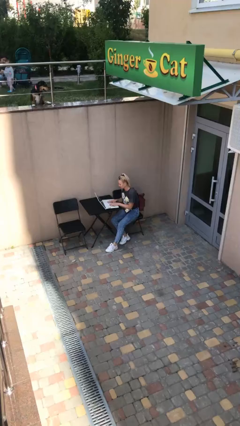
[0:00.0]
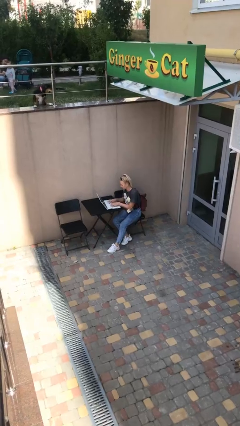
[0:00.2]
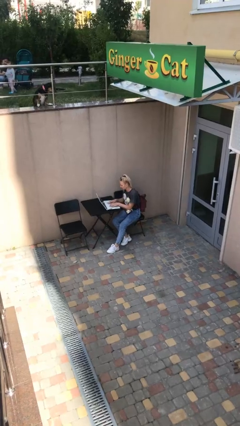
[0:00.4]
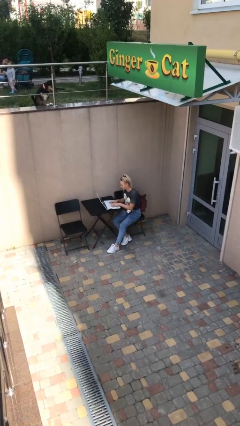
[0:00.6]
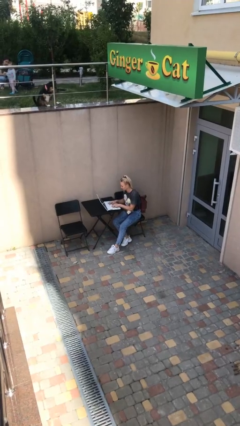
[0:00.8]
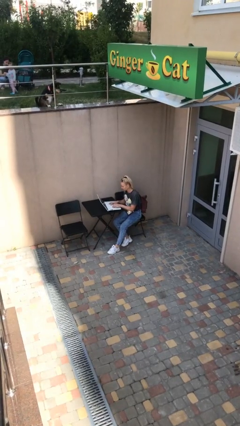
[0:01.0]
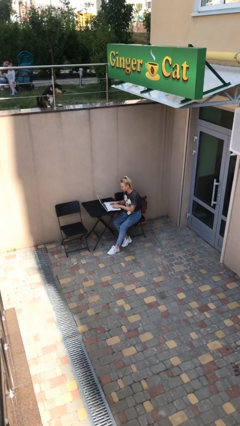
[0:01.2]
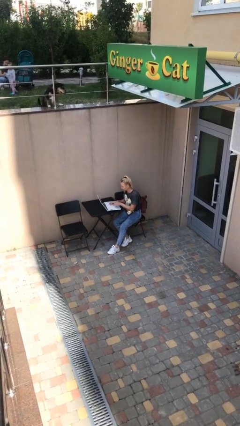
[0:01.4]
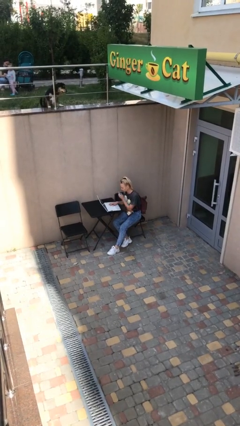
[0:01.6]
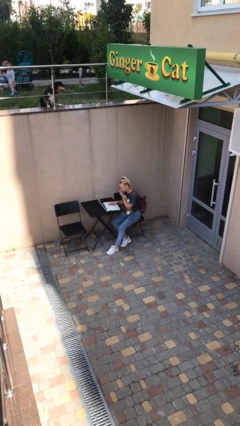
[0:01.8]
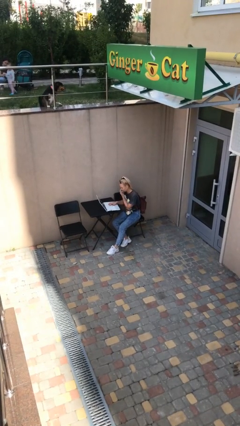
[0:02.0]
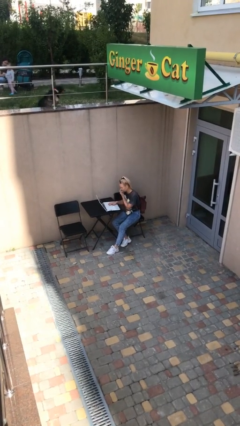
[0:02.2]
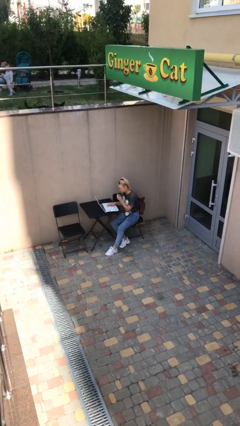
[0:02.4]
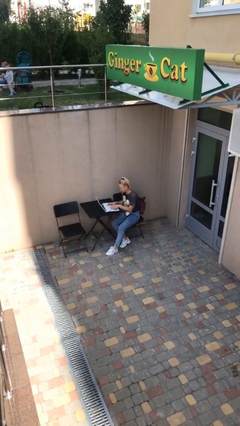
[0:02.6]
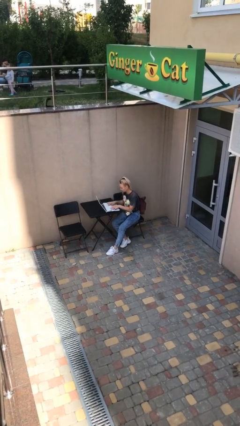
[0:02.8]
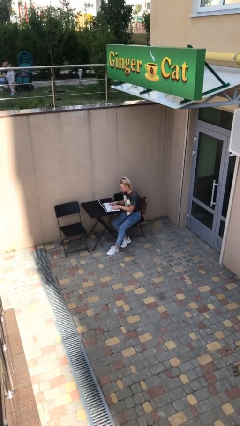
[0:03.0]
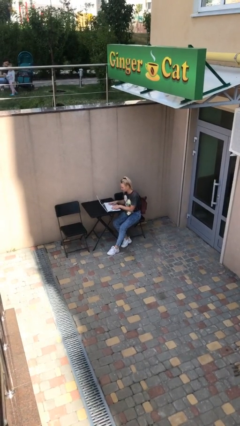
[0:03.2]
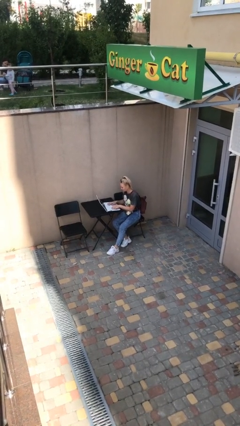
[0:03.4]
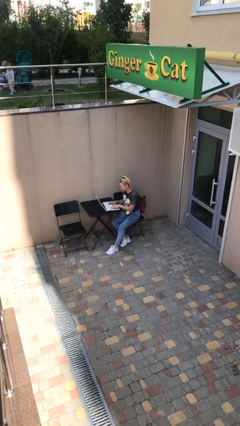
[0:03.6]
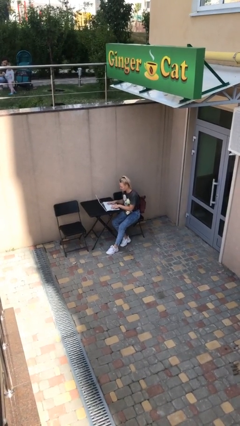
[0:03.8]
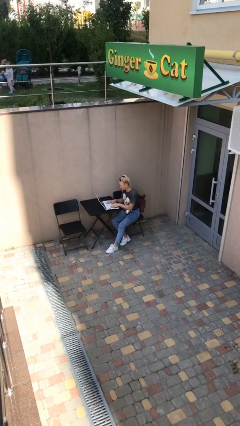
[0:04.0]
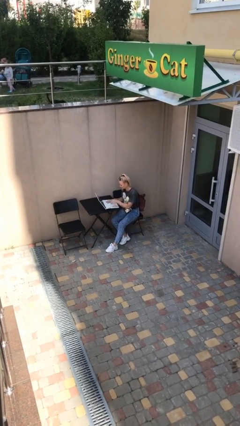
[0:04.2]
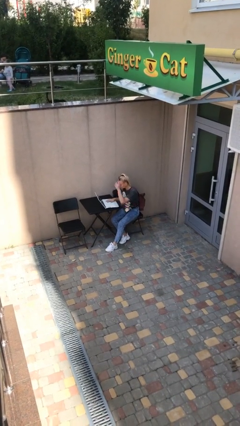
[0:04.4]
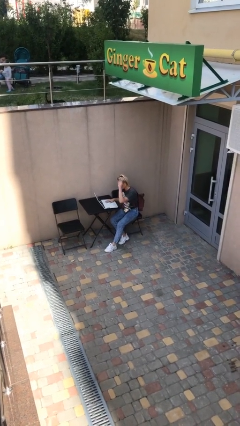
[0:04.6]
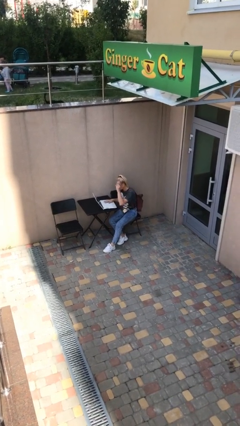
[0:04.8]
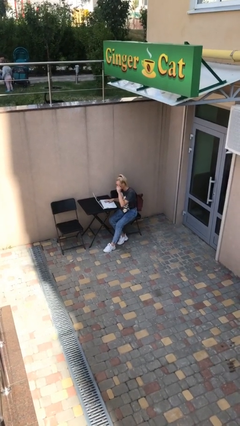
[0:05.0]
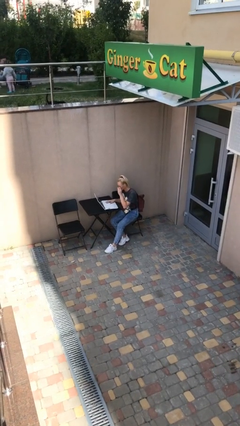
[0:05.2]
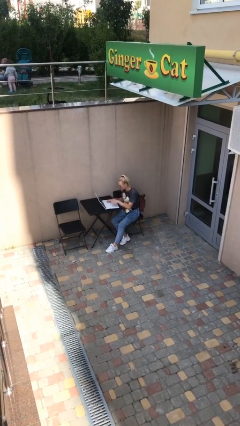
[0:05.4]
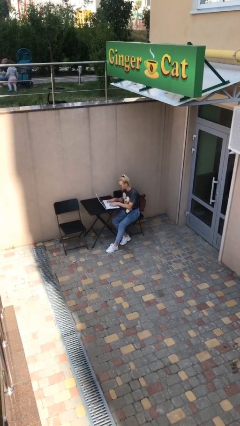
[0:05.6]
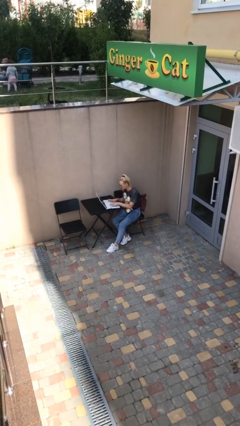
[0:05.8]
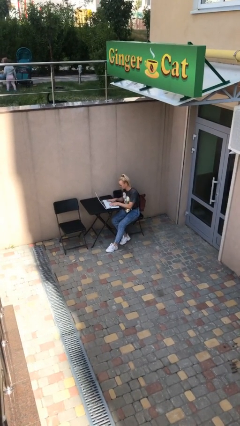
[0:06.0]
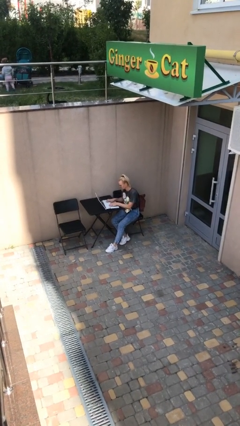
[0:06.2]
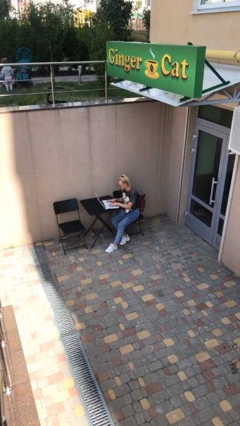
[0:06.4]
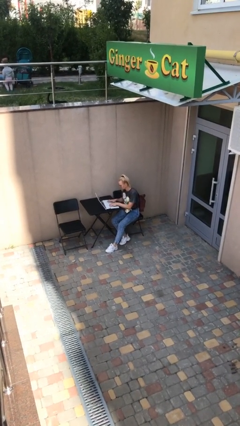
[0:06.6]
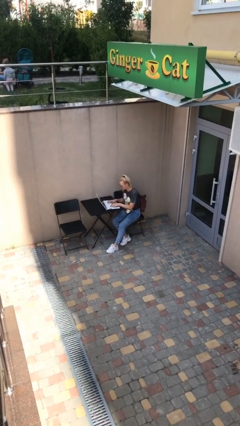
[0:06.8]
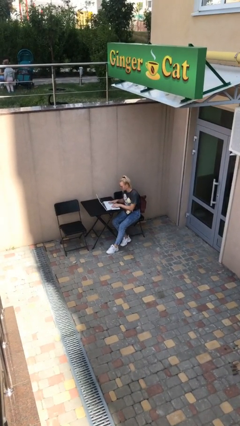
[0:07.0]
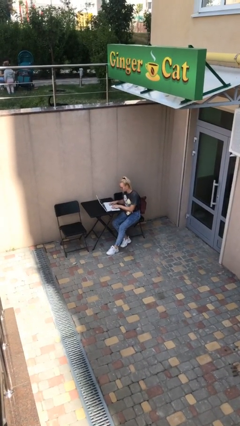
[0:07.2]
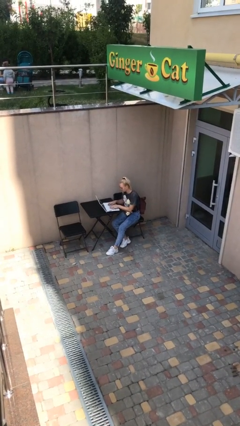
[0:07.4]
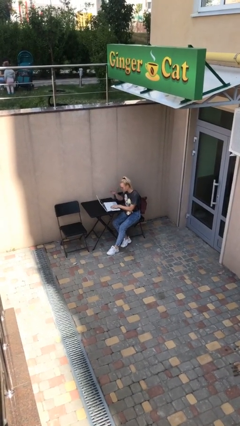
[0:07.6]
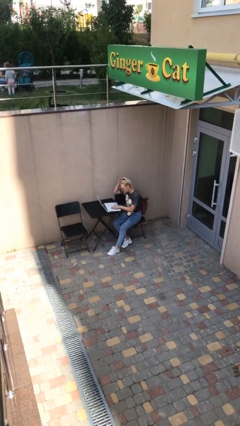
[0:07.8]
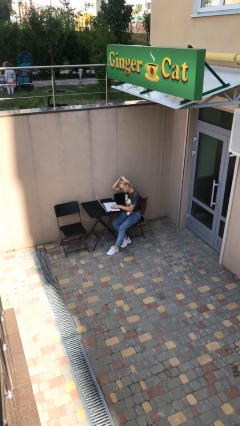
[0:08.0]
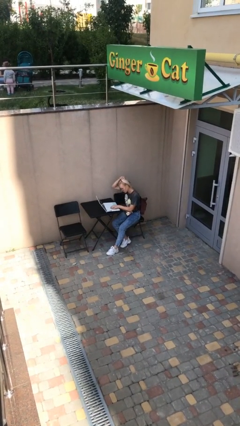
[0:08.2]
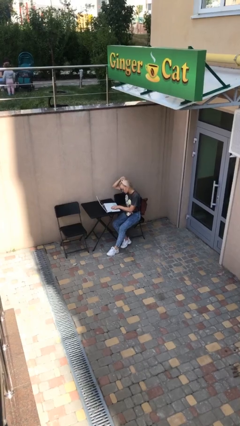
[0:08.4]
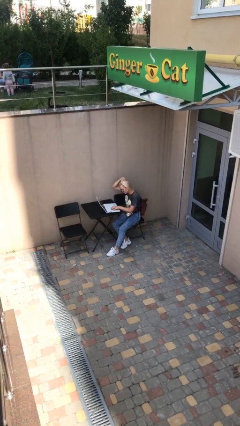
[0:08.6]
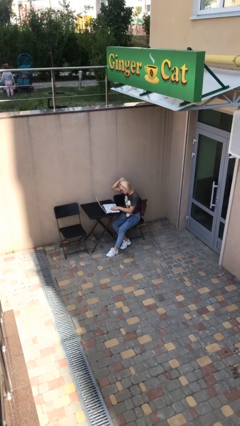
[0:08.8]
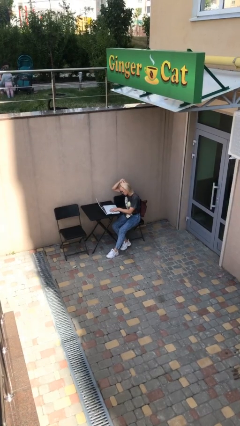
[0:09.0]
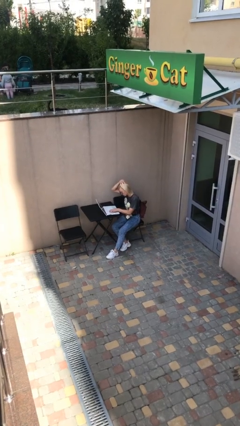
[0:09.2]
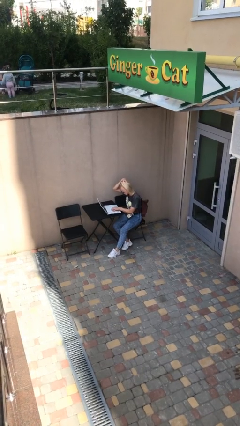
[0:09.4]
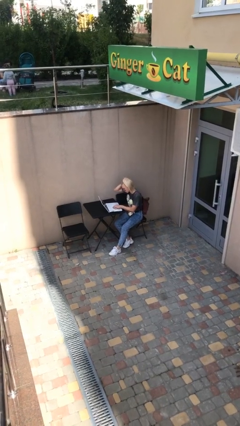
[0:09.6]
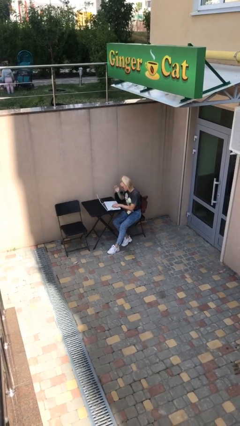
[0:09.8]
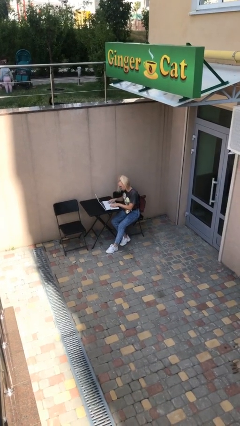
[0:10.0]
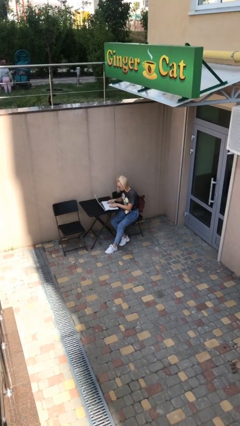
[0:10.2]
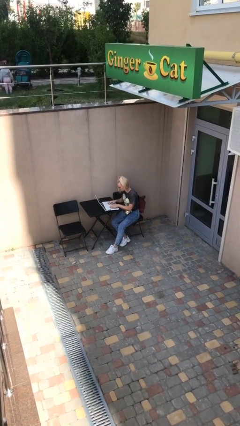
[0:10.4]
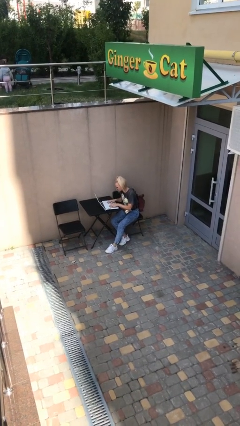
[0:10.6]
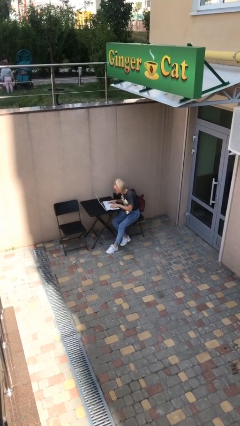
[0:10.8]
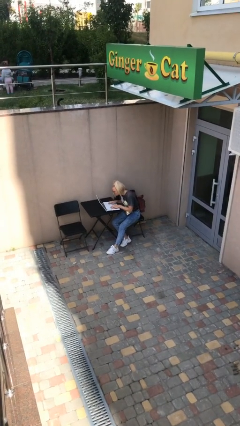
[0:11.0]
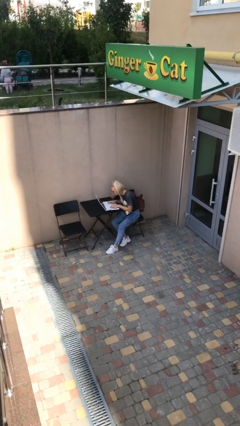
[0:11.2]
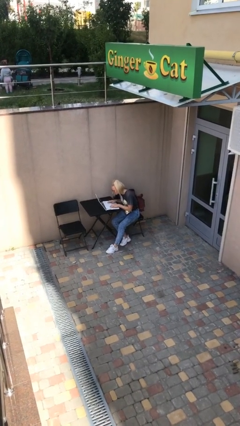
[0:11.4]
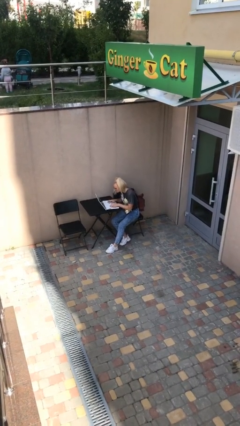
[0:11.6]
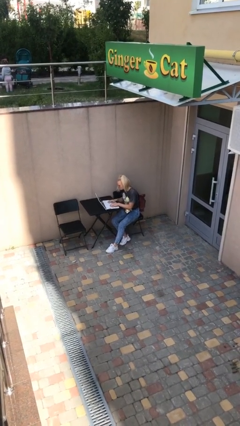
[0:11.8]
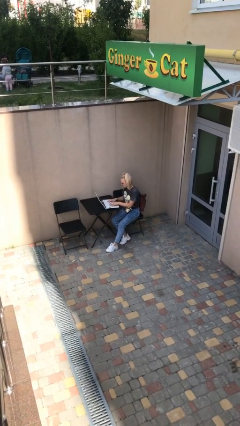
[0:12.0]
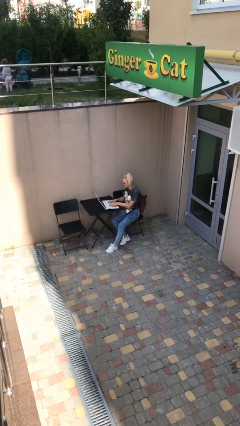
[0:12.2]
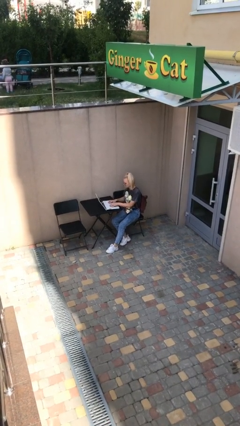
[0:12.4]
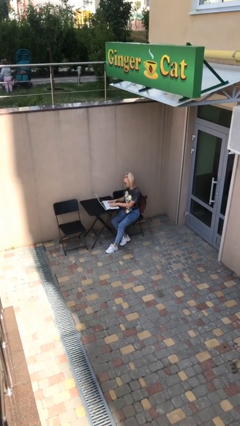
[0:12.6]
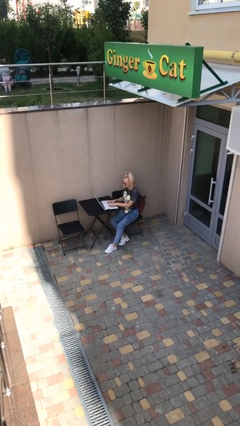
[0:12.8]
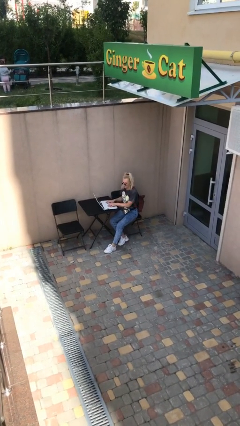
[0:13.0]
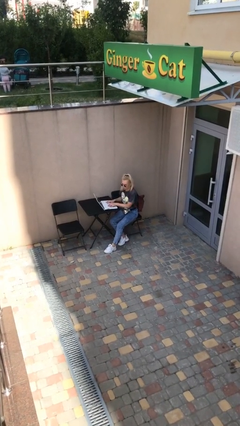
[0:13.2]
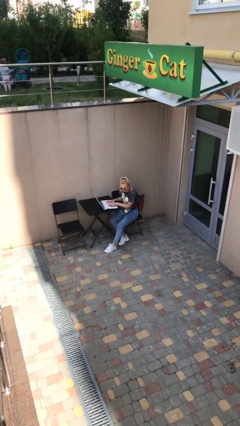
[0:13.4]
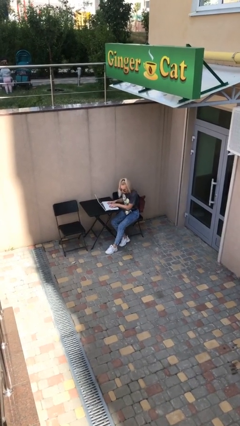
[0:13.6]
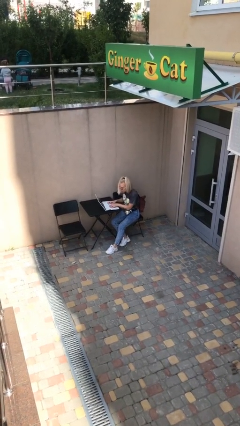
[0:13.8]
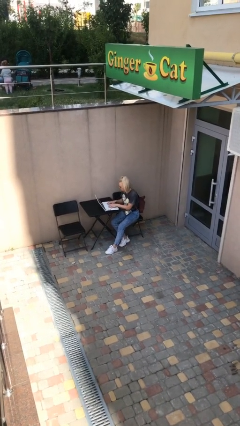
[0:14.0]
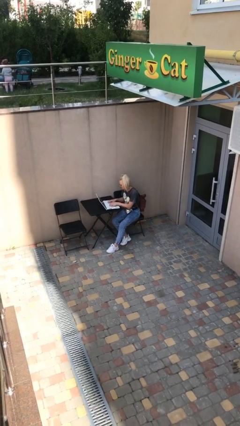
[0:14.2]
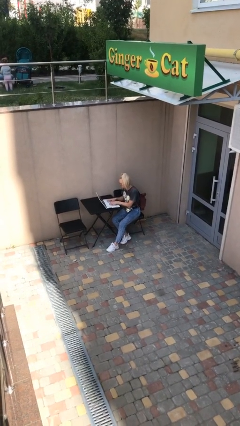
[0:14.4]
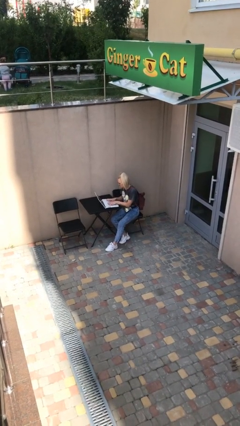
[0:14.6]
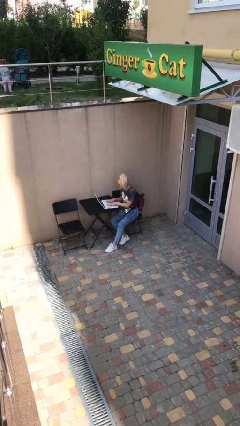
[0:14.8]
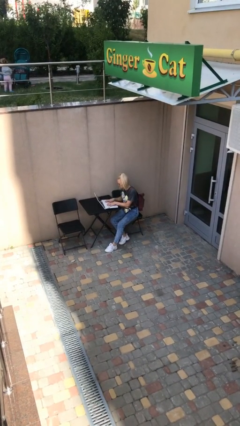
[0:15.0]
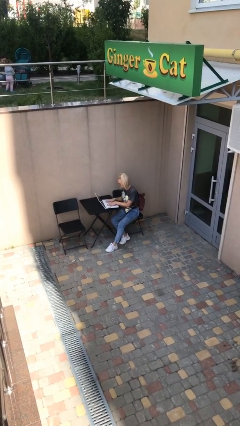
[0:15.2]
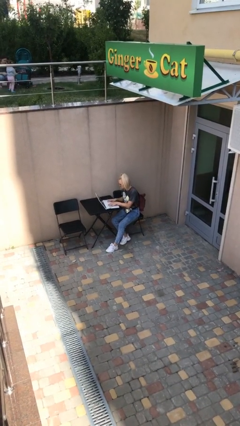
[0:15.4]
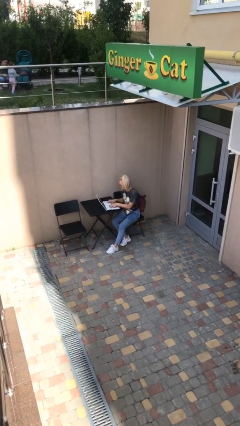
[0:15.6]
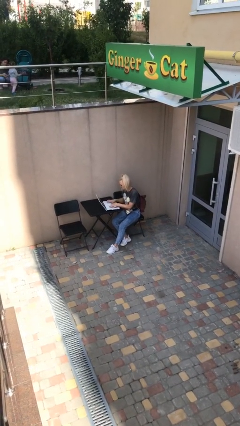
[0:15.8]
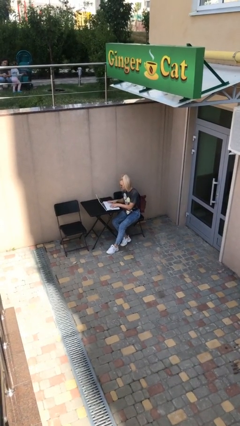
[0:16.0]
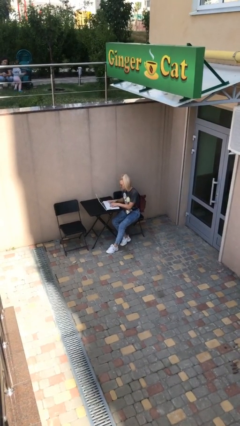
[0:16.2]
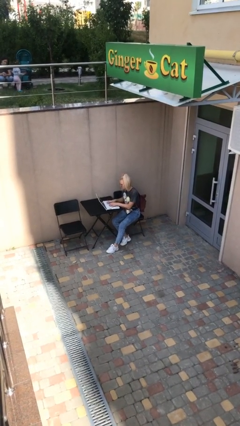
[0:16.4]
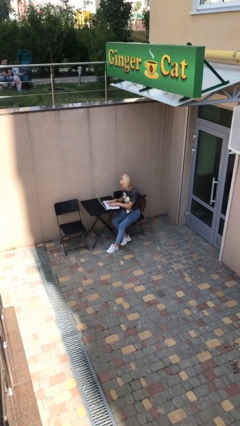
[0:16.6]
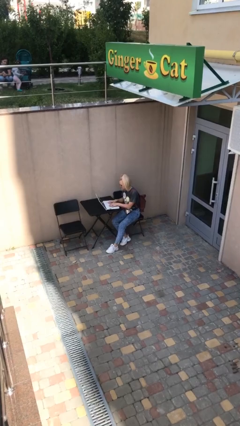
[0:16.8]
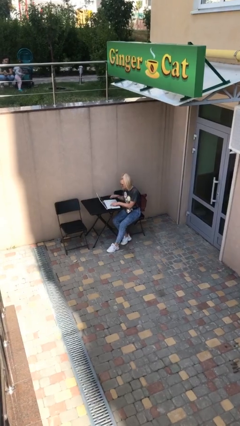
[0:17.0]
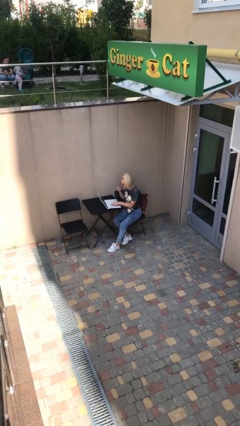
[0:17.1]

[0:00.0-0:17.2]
person interacts with laptop

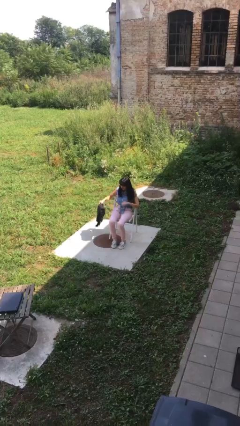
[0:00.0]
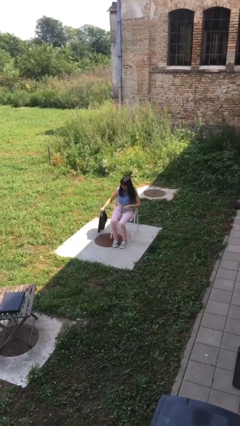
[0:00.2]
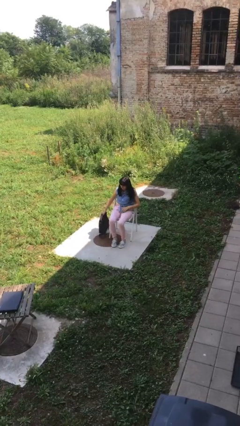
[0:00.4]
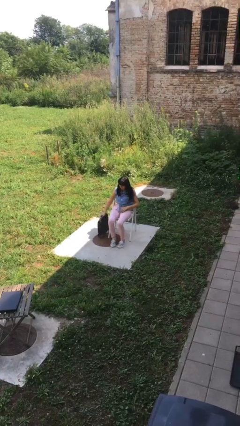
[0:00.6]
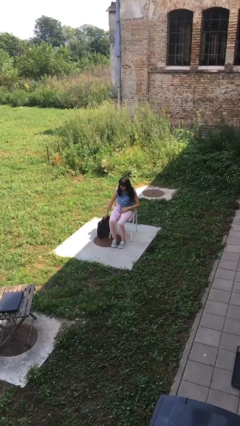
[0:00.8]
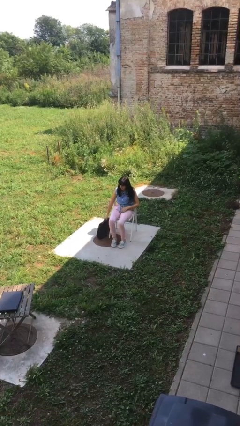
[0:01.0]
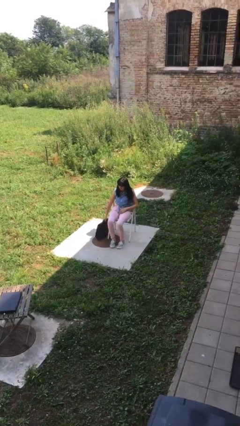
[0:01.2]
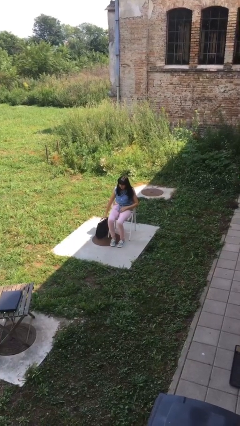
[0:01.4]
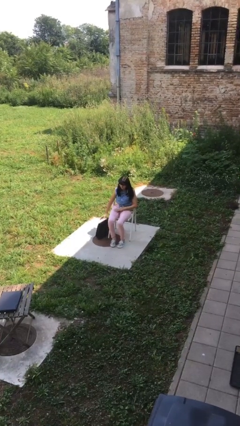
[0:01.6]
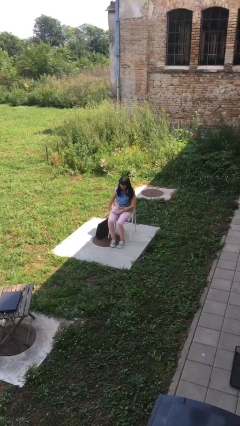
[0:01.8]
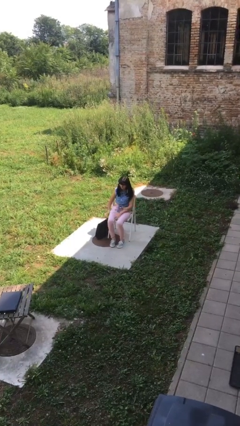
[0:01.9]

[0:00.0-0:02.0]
person puts down object on floor
